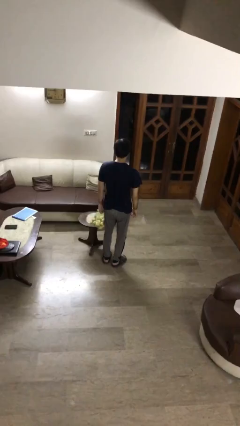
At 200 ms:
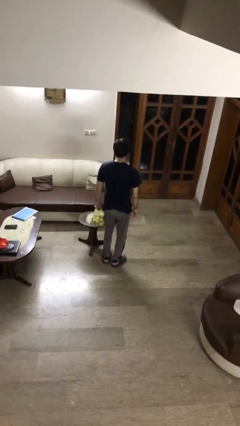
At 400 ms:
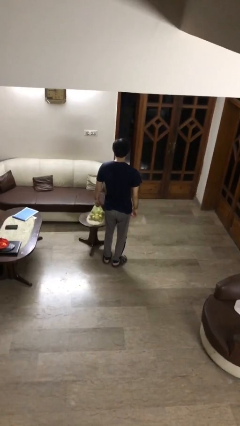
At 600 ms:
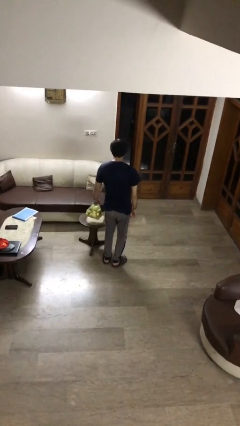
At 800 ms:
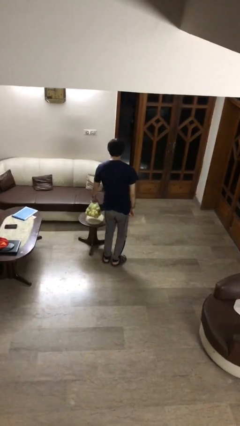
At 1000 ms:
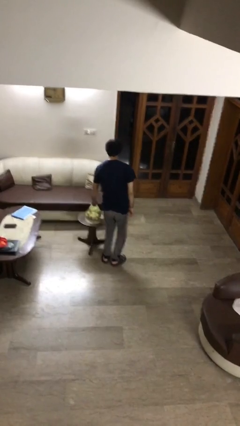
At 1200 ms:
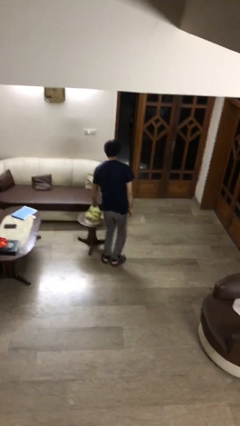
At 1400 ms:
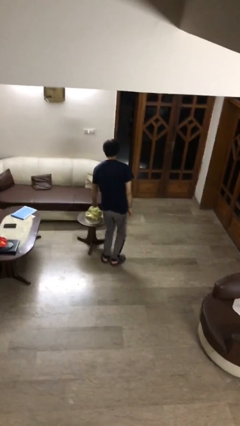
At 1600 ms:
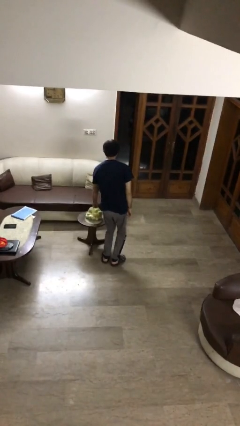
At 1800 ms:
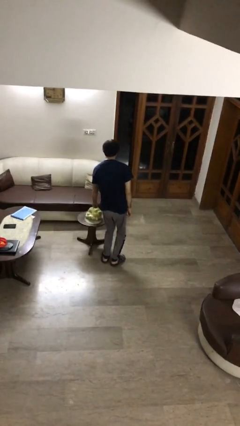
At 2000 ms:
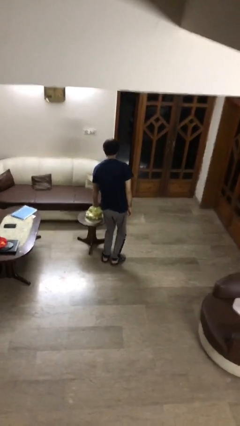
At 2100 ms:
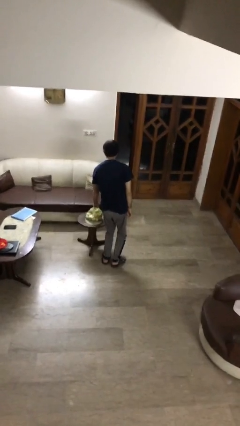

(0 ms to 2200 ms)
person puts down object on table

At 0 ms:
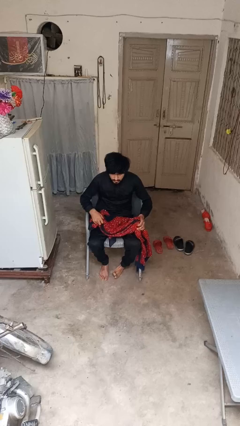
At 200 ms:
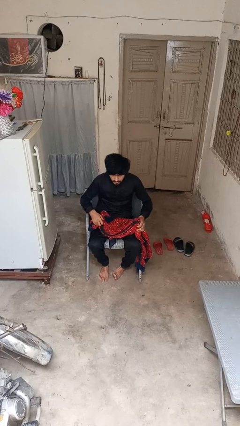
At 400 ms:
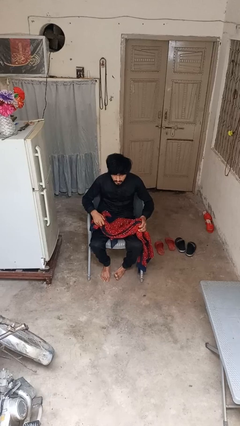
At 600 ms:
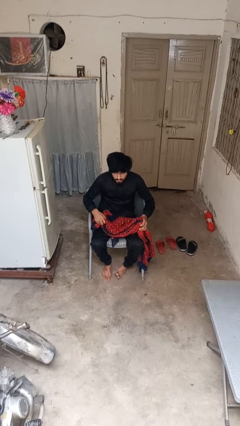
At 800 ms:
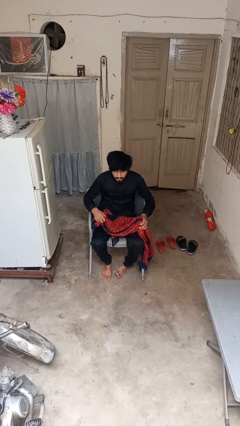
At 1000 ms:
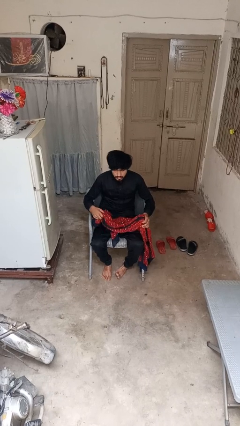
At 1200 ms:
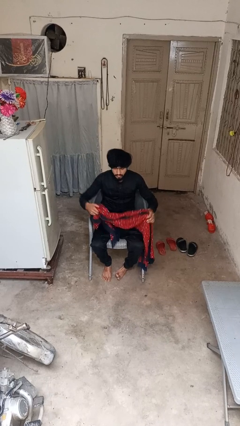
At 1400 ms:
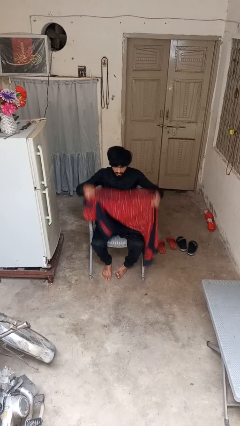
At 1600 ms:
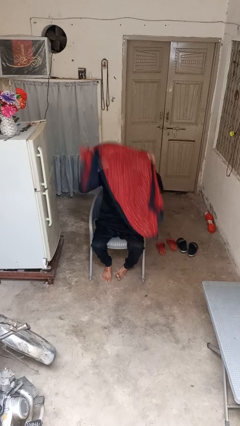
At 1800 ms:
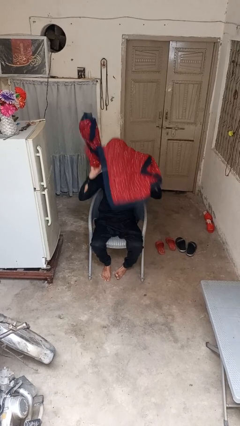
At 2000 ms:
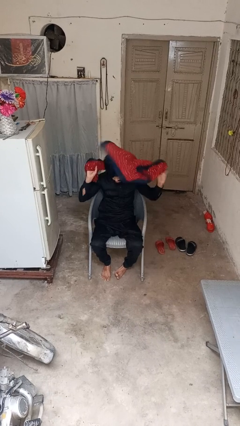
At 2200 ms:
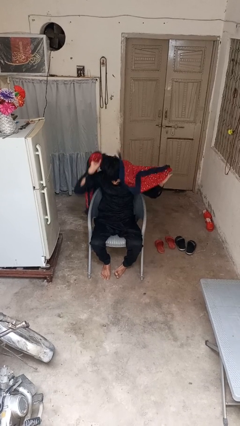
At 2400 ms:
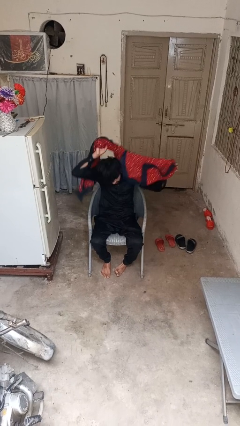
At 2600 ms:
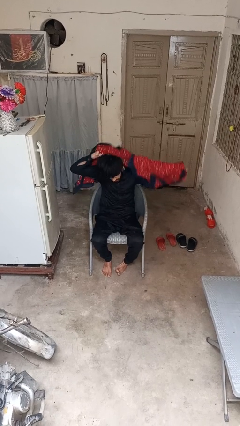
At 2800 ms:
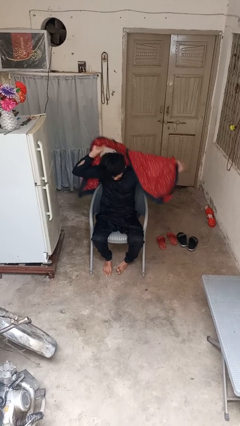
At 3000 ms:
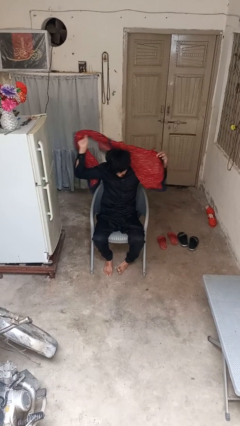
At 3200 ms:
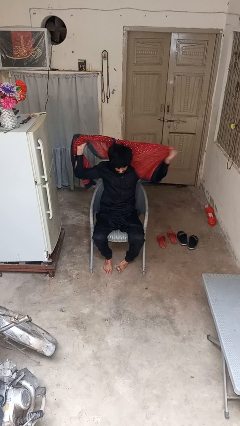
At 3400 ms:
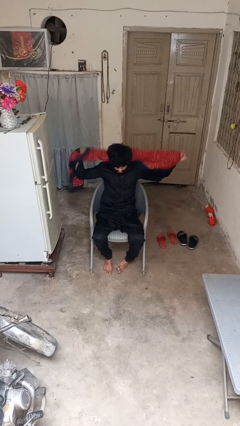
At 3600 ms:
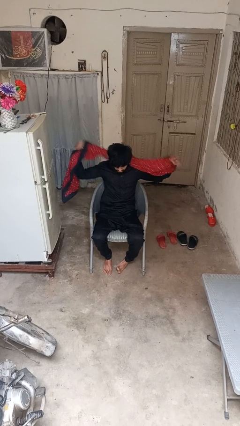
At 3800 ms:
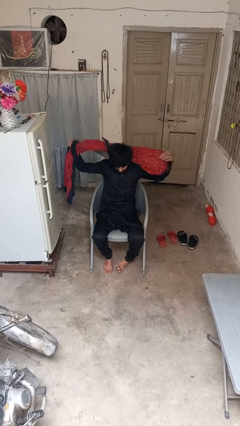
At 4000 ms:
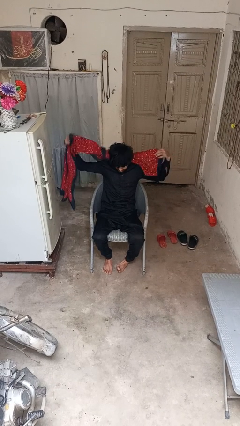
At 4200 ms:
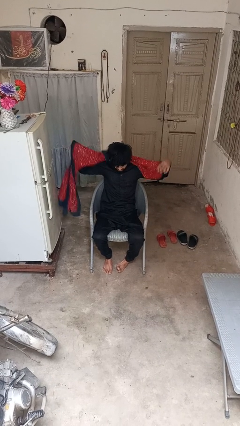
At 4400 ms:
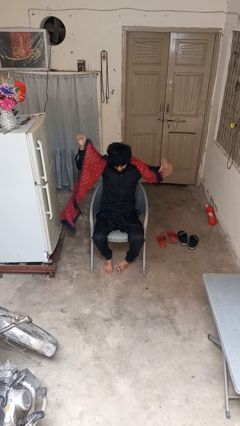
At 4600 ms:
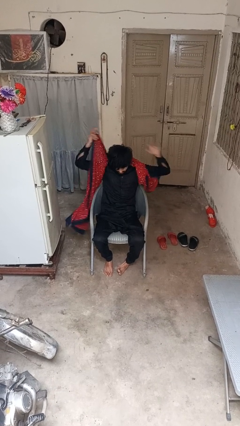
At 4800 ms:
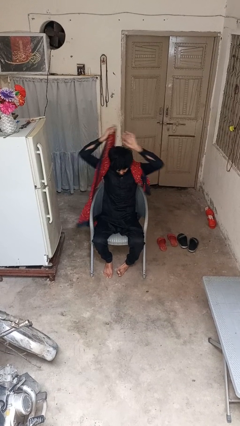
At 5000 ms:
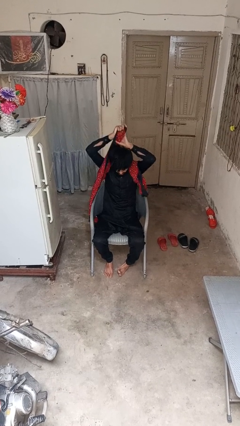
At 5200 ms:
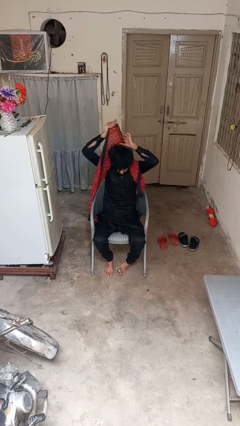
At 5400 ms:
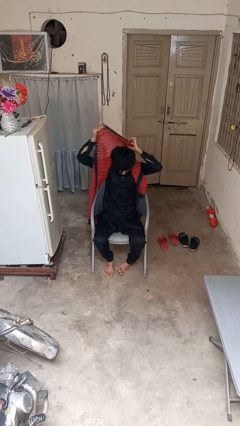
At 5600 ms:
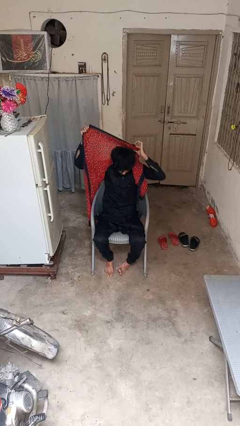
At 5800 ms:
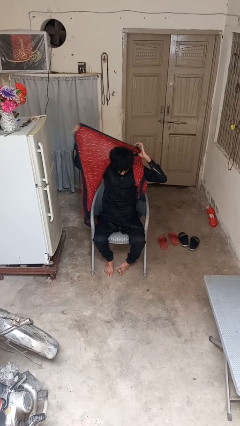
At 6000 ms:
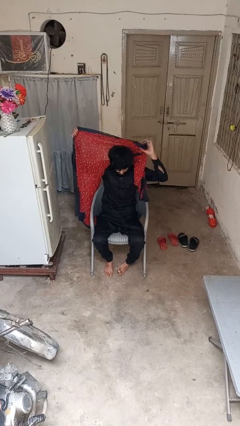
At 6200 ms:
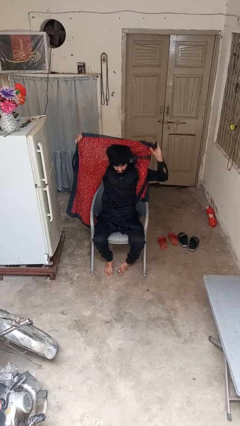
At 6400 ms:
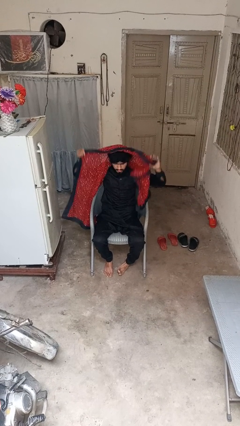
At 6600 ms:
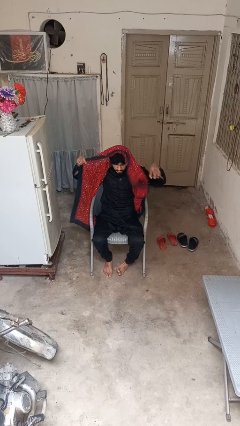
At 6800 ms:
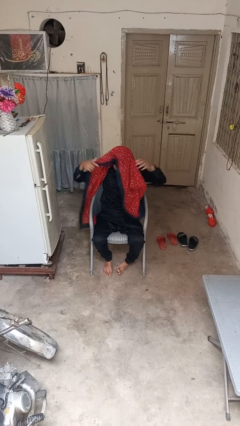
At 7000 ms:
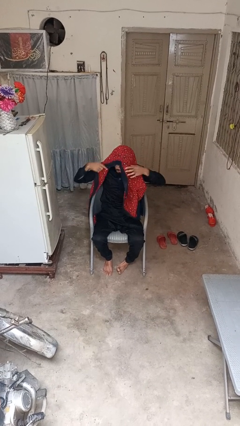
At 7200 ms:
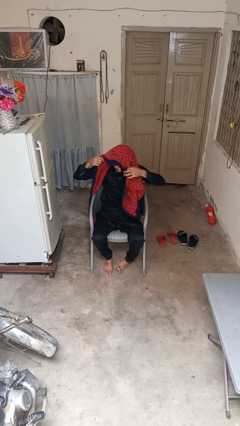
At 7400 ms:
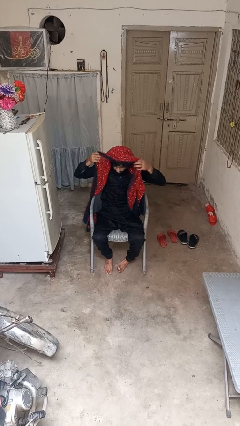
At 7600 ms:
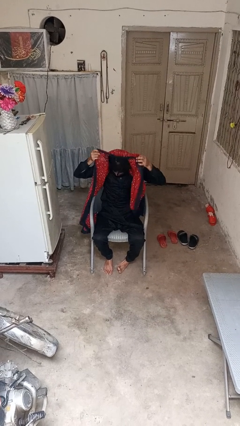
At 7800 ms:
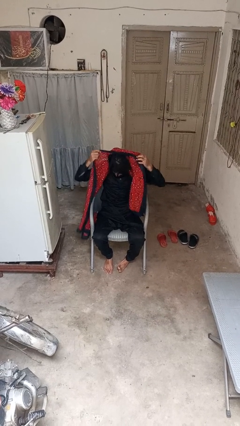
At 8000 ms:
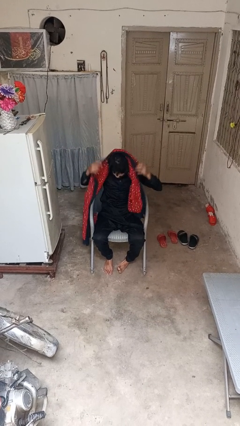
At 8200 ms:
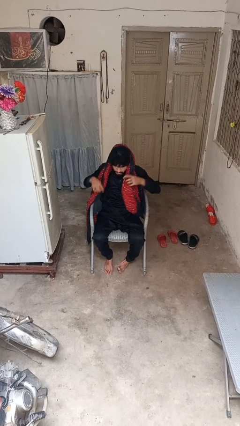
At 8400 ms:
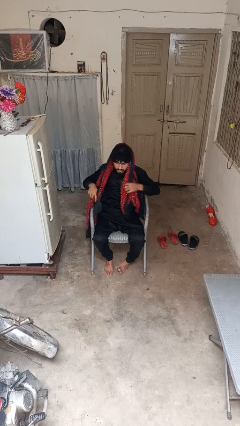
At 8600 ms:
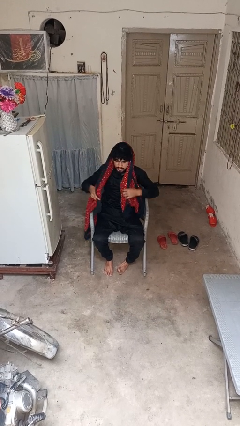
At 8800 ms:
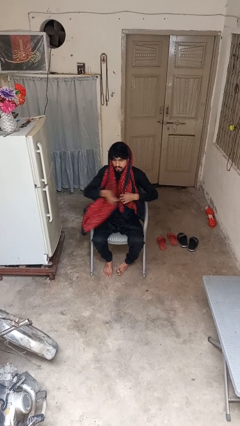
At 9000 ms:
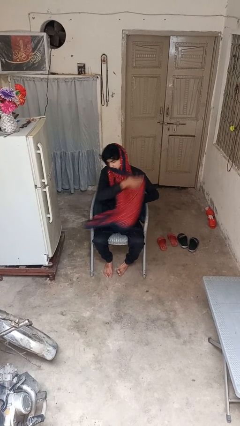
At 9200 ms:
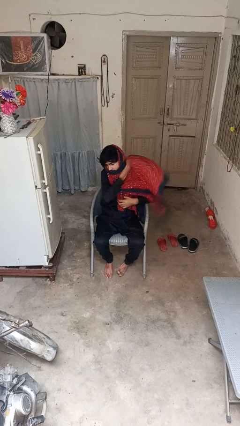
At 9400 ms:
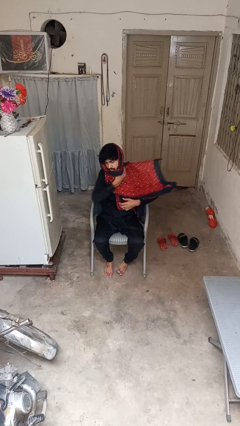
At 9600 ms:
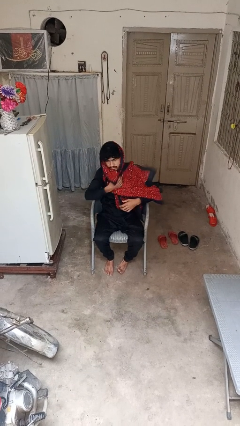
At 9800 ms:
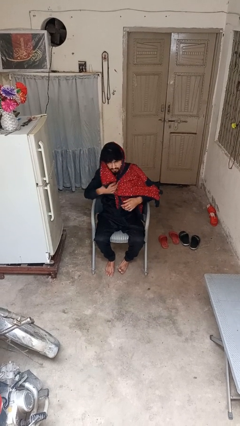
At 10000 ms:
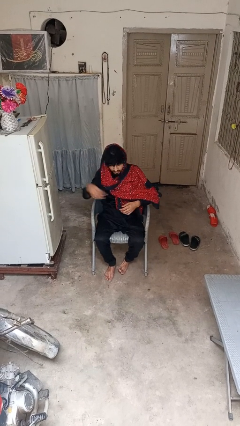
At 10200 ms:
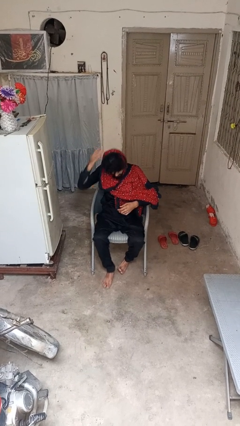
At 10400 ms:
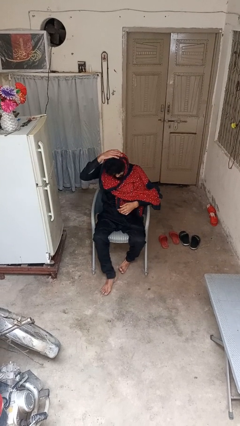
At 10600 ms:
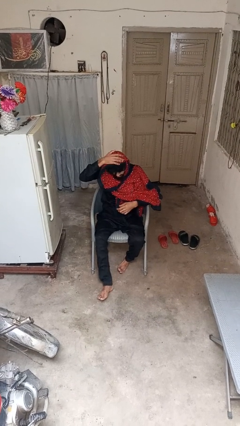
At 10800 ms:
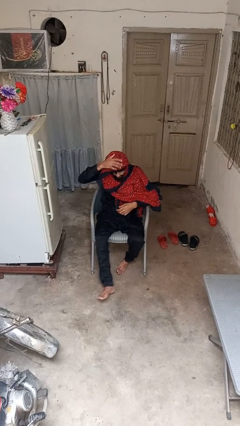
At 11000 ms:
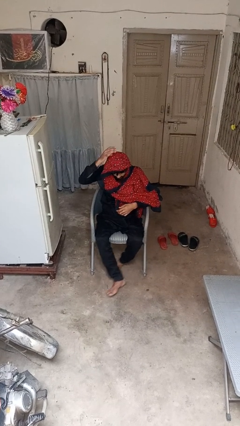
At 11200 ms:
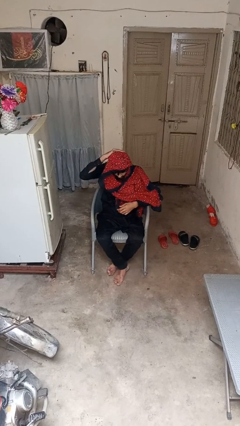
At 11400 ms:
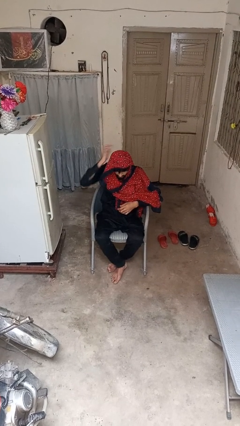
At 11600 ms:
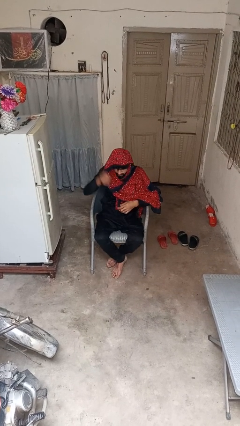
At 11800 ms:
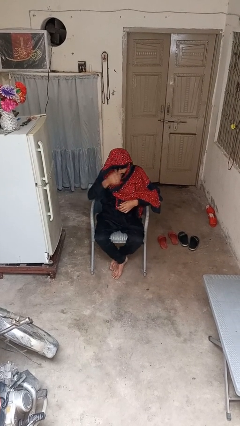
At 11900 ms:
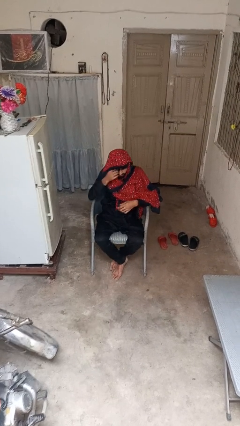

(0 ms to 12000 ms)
person puts on scarf

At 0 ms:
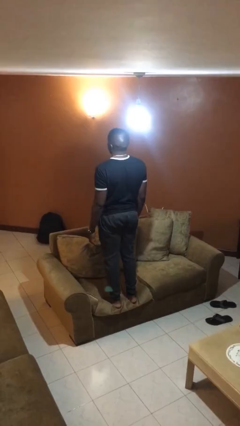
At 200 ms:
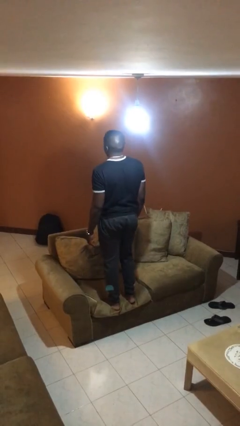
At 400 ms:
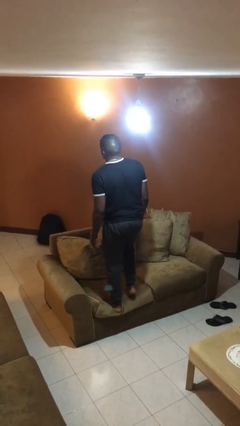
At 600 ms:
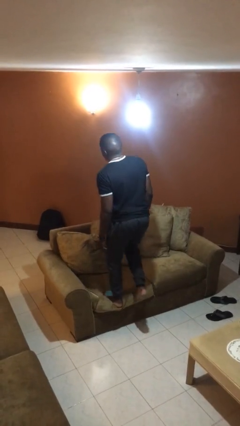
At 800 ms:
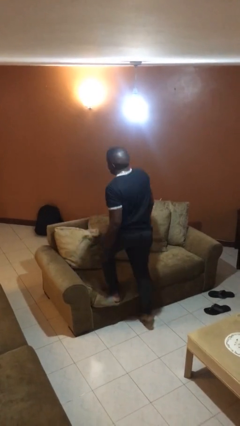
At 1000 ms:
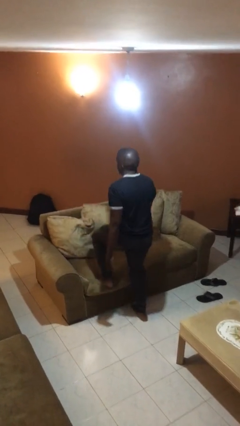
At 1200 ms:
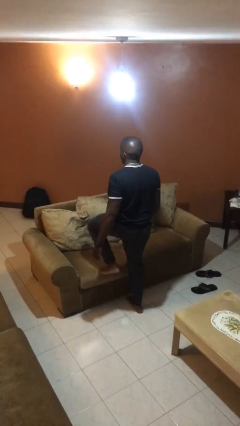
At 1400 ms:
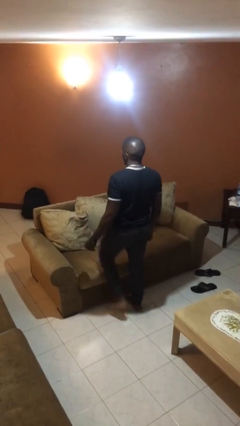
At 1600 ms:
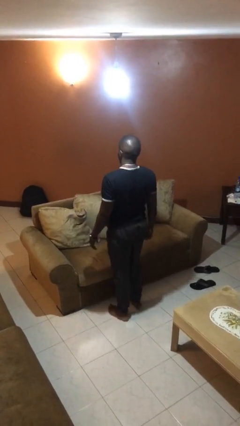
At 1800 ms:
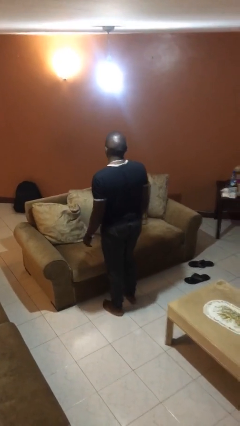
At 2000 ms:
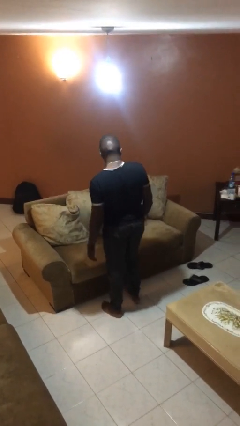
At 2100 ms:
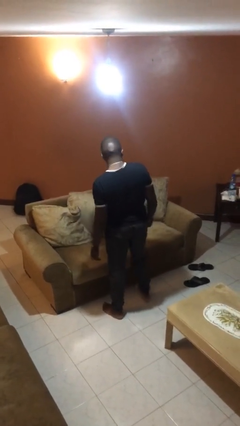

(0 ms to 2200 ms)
person climbs off couch

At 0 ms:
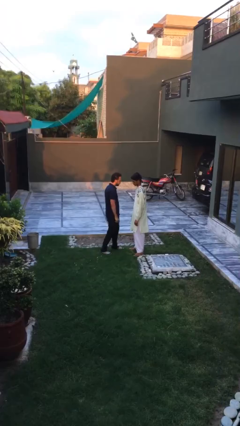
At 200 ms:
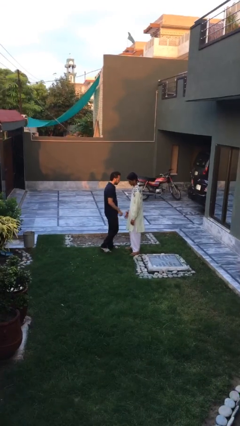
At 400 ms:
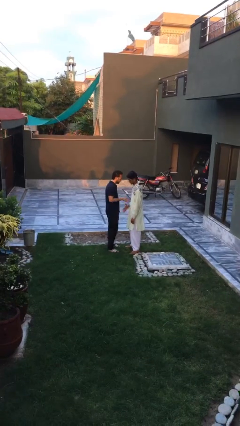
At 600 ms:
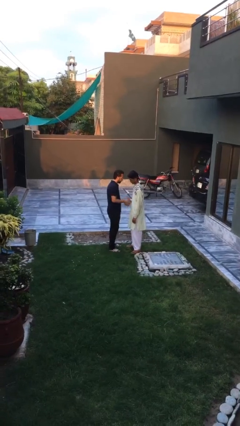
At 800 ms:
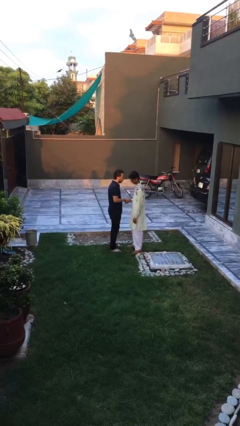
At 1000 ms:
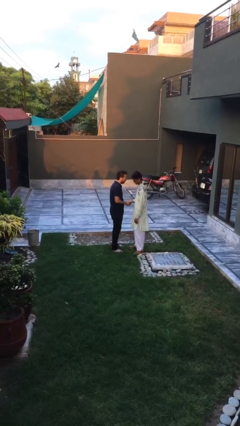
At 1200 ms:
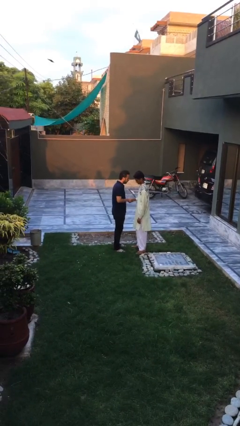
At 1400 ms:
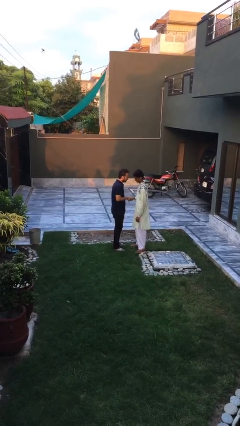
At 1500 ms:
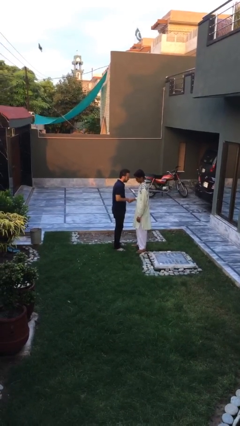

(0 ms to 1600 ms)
person shakes hand
